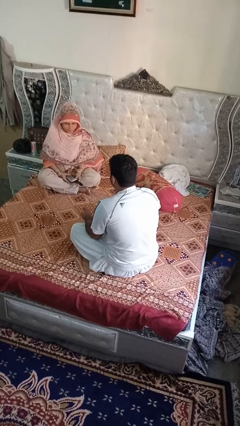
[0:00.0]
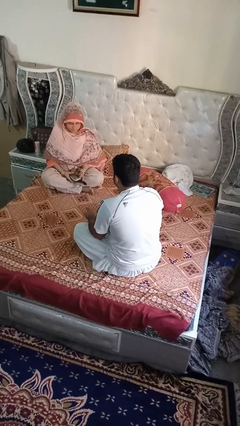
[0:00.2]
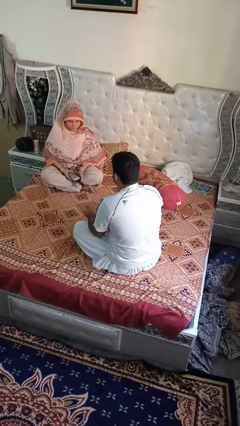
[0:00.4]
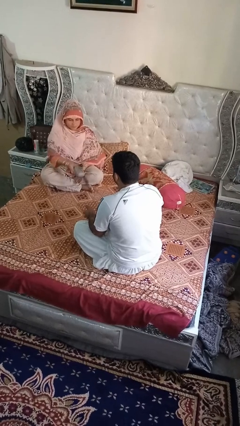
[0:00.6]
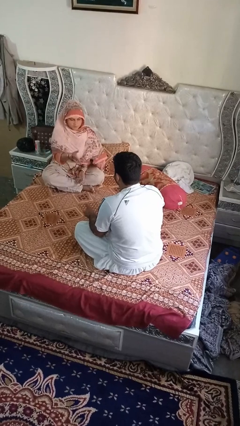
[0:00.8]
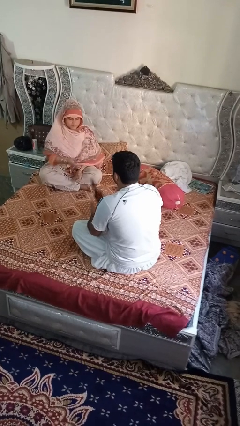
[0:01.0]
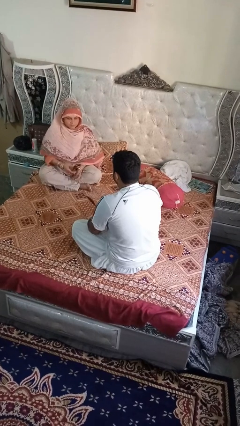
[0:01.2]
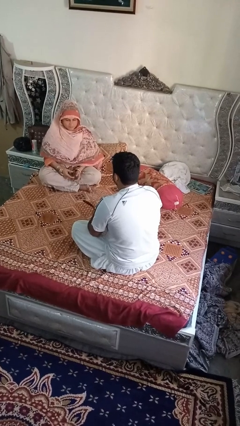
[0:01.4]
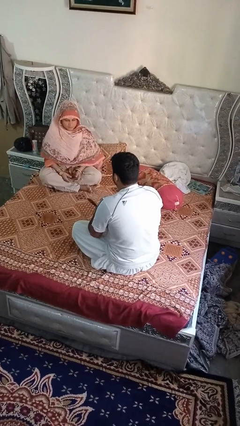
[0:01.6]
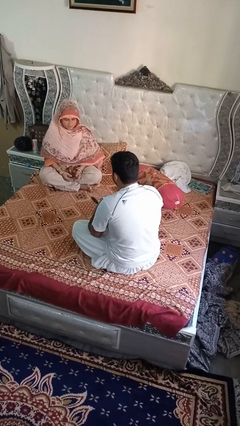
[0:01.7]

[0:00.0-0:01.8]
person catches object from person

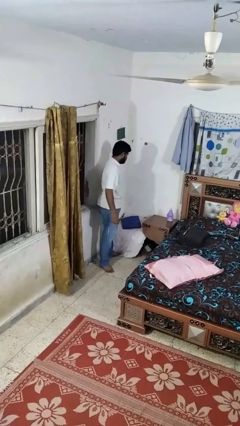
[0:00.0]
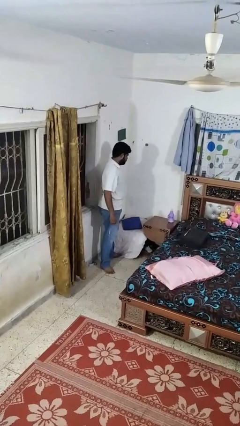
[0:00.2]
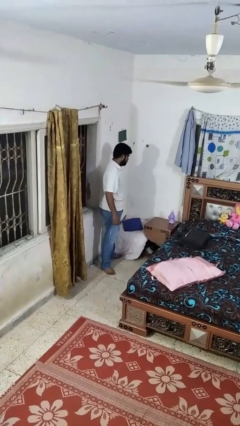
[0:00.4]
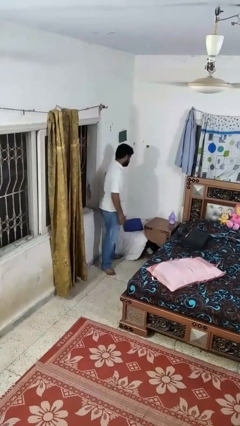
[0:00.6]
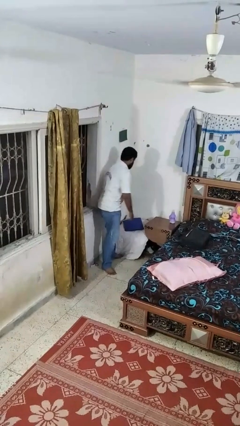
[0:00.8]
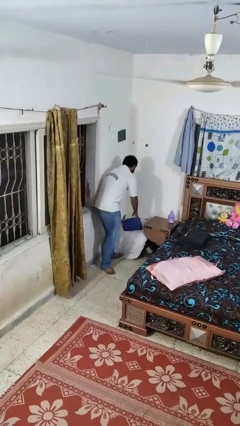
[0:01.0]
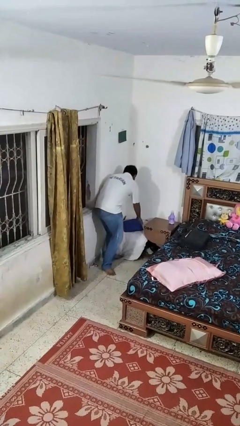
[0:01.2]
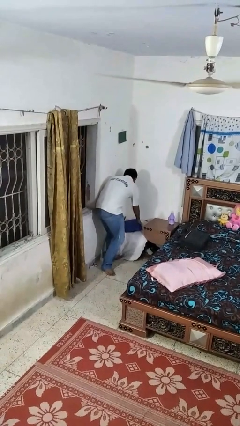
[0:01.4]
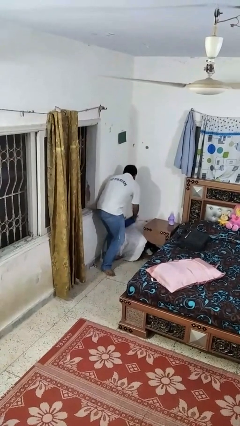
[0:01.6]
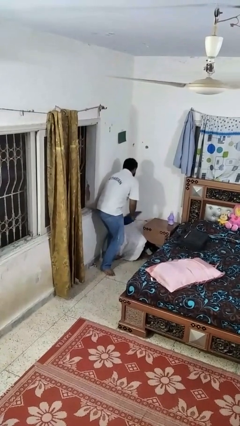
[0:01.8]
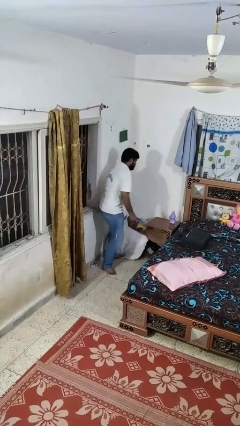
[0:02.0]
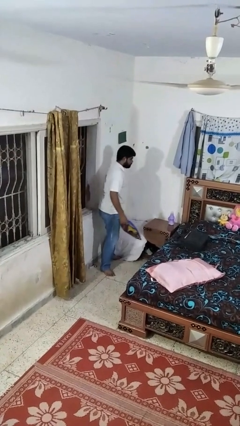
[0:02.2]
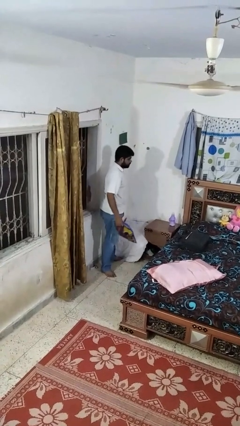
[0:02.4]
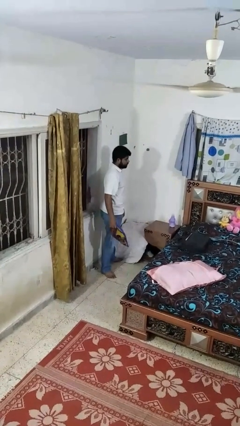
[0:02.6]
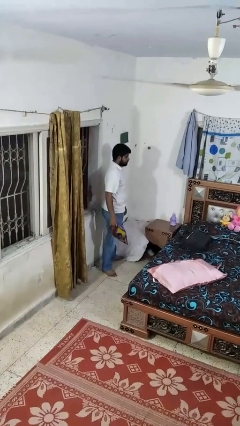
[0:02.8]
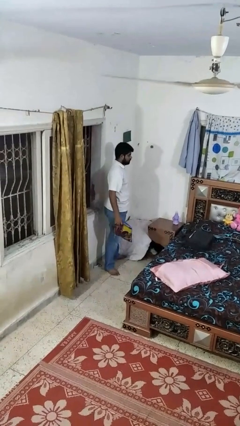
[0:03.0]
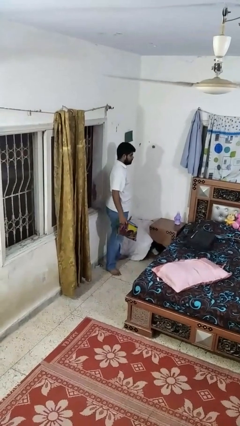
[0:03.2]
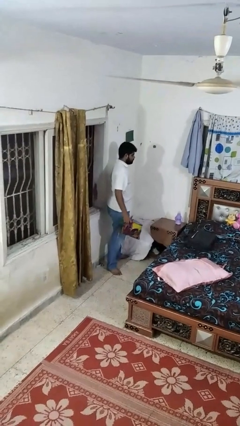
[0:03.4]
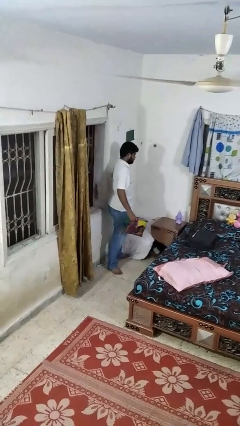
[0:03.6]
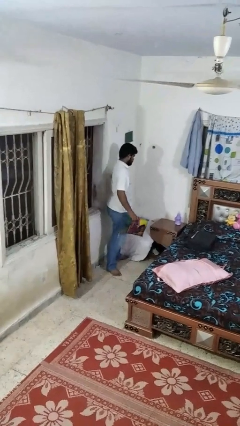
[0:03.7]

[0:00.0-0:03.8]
person picks up object from couch

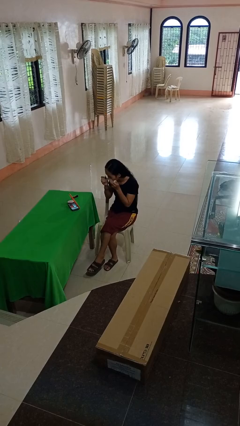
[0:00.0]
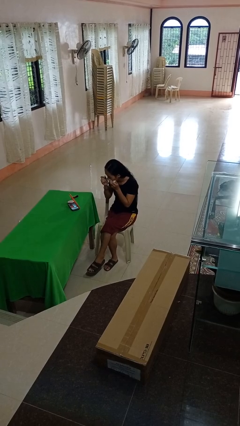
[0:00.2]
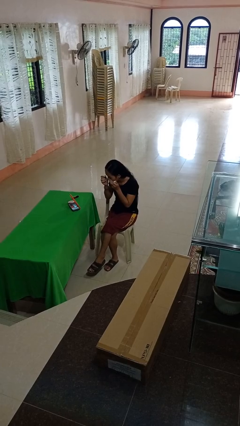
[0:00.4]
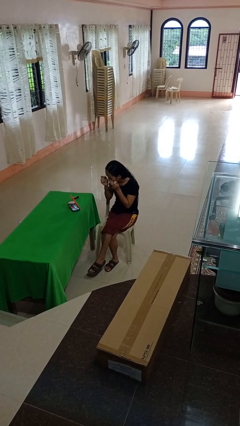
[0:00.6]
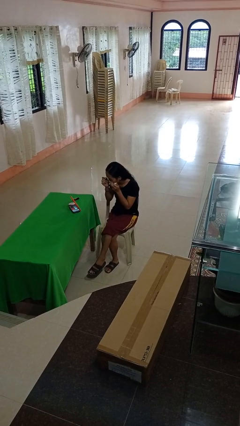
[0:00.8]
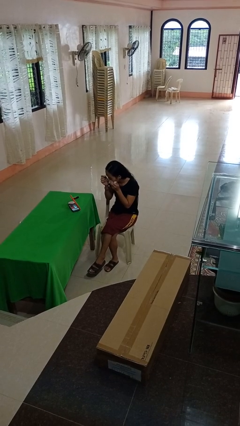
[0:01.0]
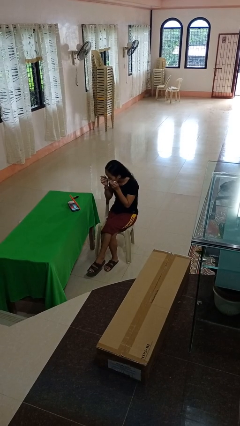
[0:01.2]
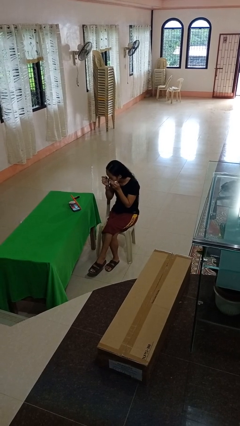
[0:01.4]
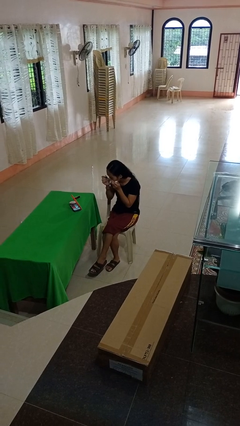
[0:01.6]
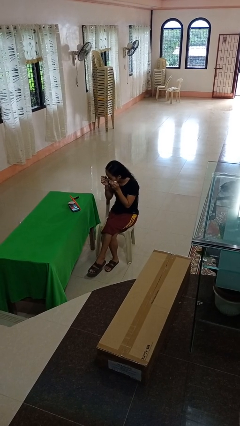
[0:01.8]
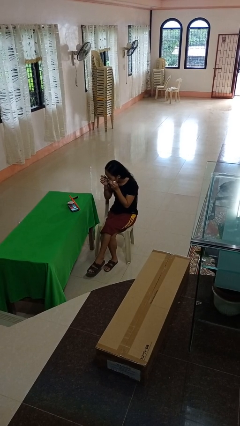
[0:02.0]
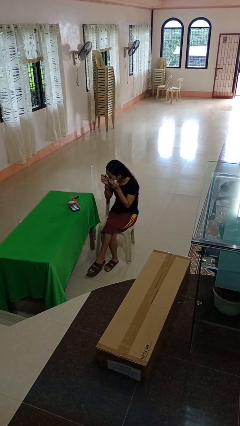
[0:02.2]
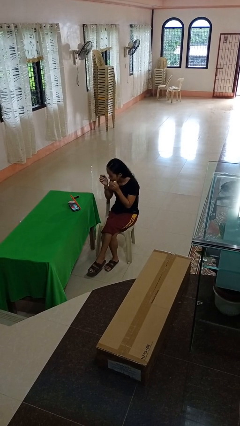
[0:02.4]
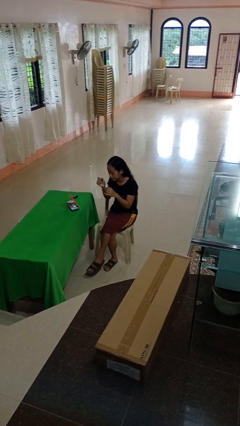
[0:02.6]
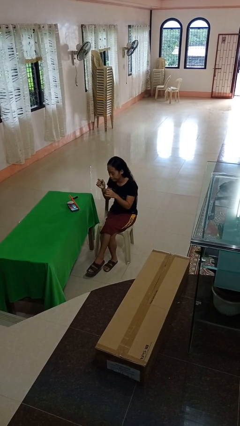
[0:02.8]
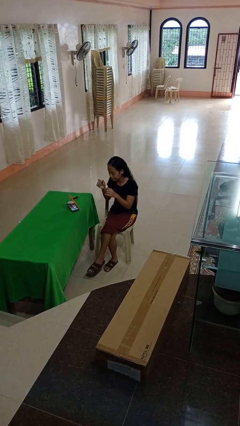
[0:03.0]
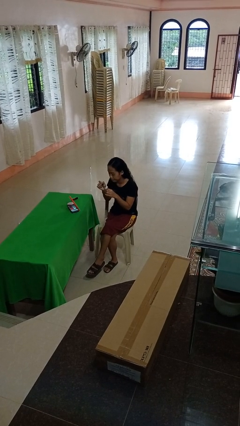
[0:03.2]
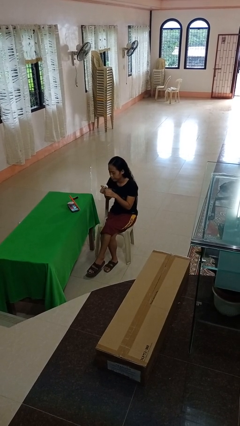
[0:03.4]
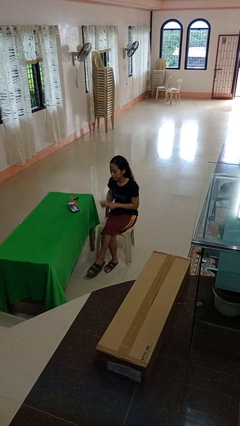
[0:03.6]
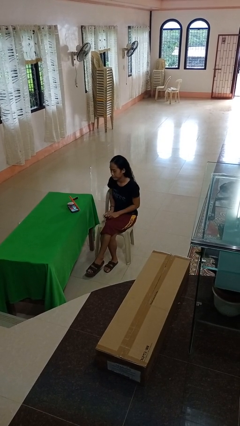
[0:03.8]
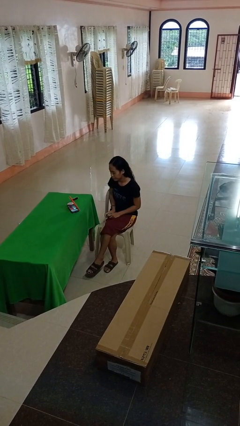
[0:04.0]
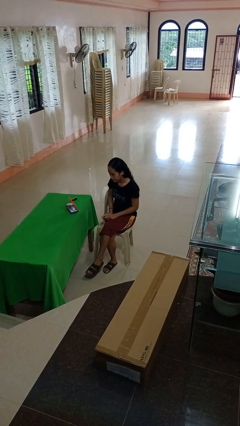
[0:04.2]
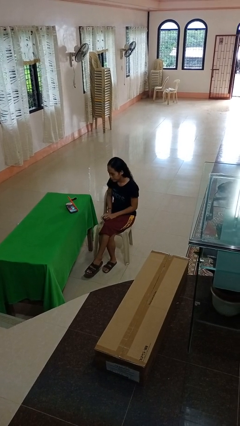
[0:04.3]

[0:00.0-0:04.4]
person applies eye makeup

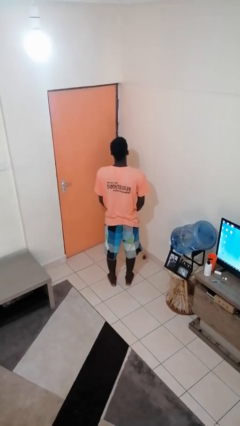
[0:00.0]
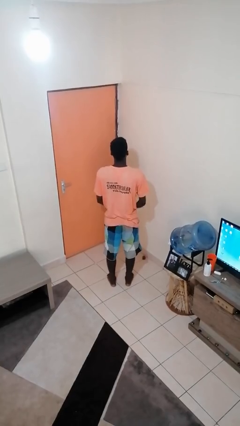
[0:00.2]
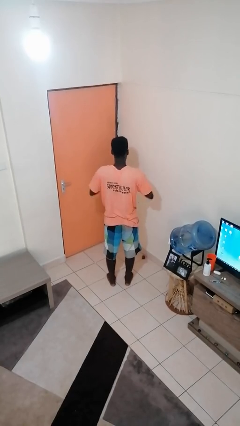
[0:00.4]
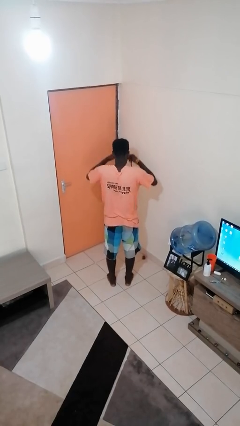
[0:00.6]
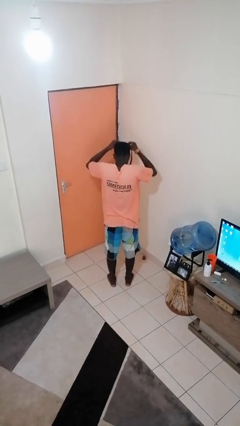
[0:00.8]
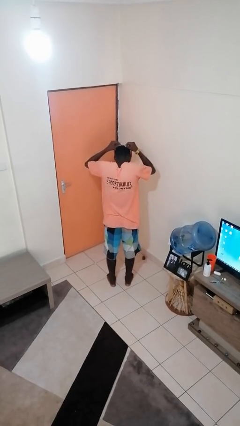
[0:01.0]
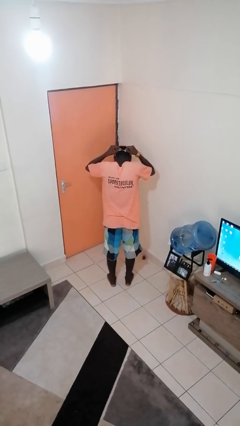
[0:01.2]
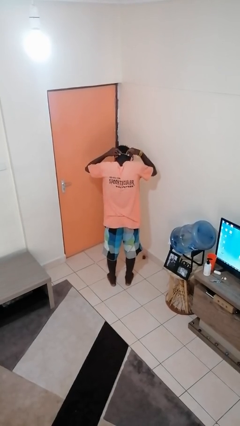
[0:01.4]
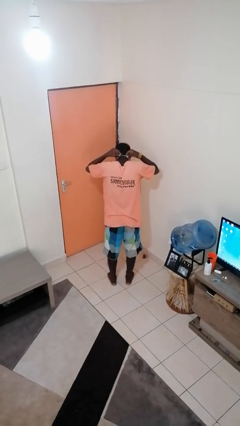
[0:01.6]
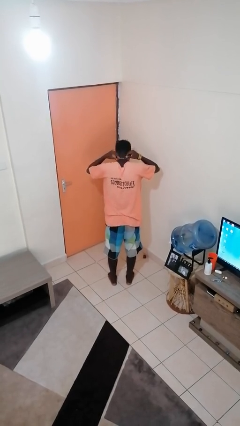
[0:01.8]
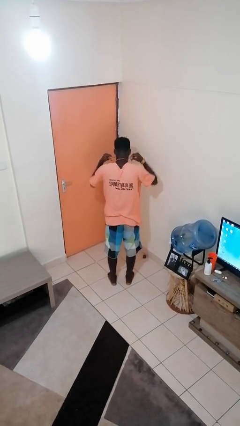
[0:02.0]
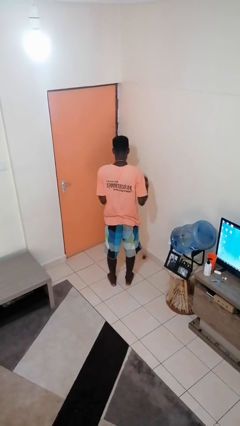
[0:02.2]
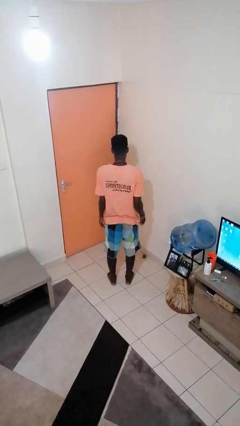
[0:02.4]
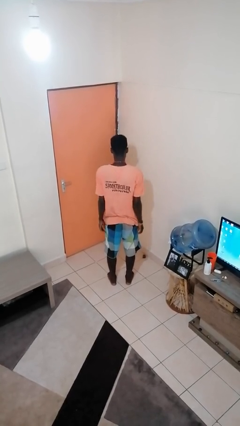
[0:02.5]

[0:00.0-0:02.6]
person puts on necklace

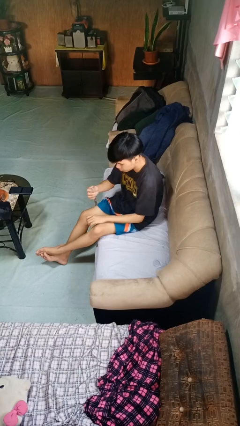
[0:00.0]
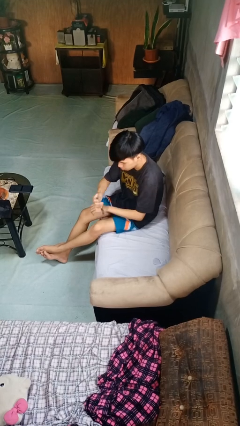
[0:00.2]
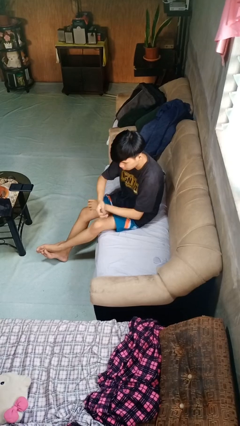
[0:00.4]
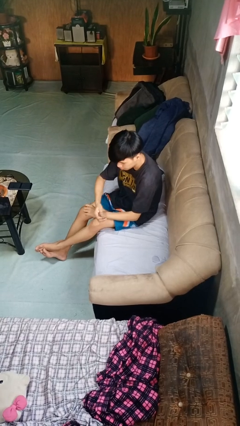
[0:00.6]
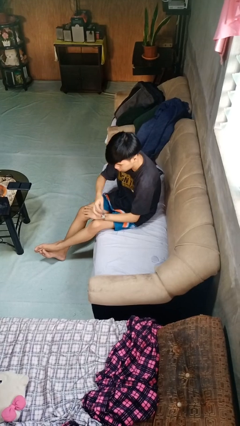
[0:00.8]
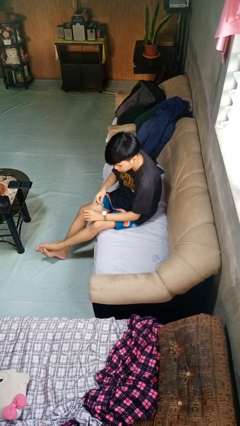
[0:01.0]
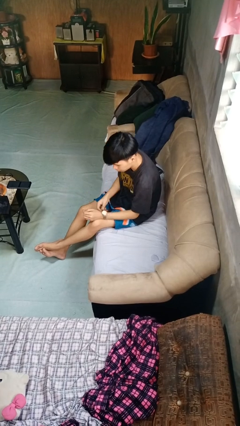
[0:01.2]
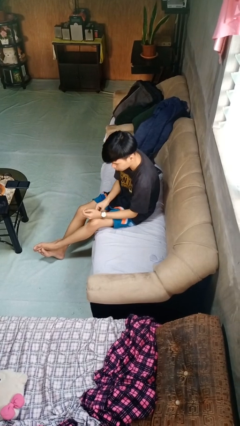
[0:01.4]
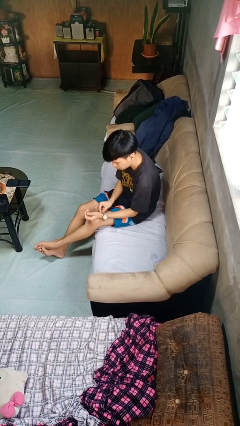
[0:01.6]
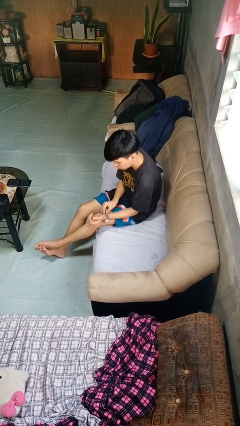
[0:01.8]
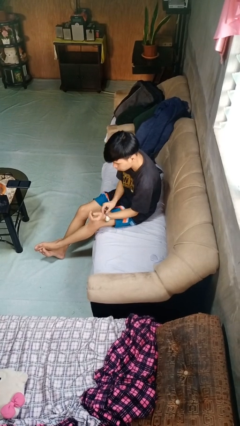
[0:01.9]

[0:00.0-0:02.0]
person puts on wristwatch

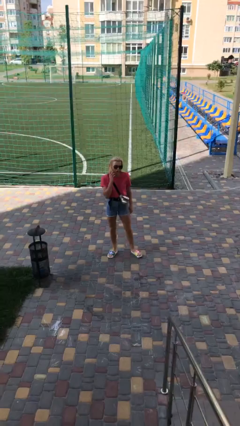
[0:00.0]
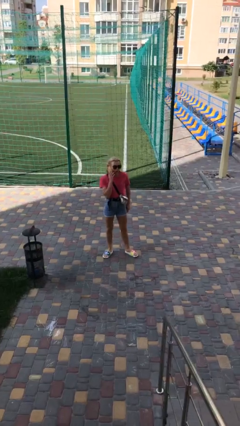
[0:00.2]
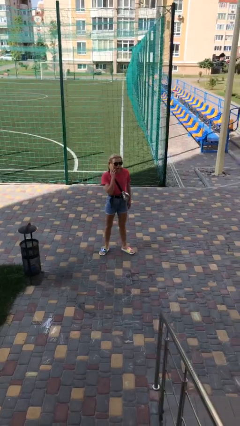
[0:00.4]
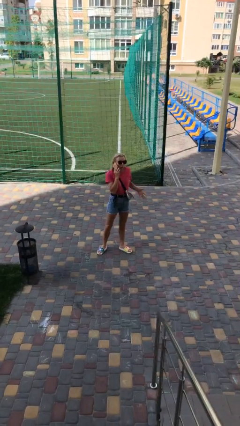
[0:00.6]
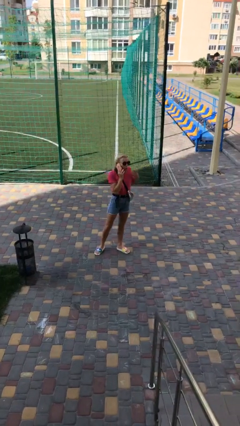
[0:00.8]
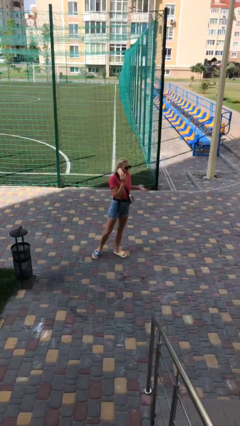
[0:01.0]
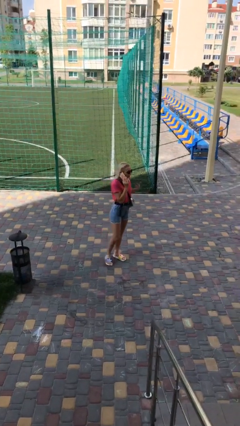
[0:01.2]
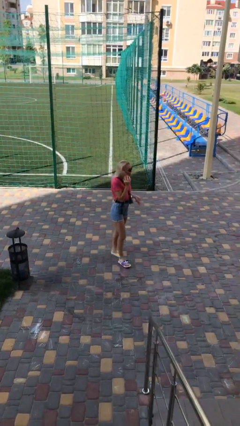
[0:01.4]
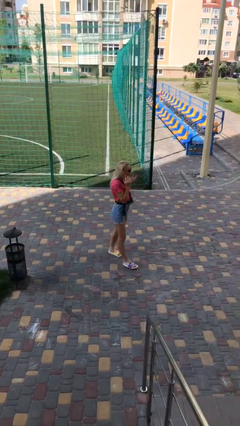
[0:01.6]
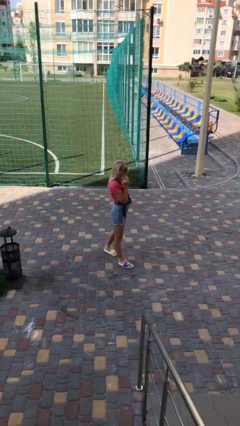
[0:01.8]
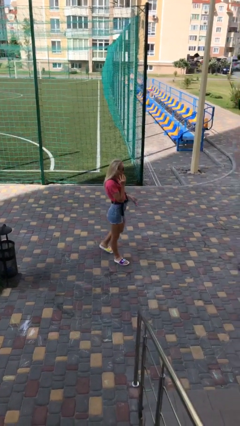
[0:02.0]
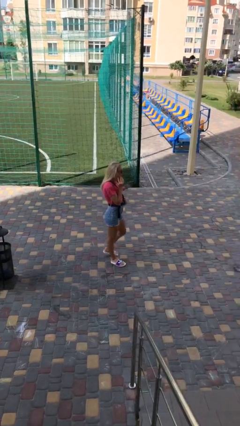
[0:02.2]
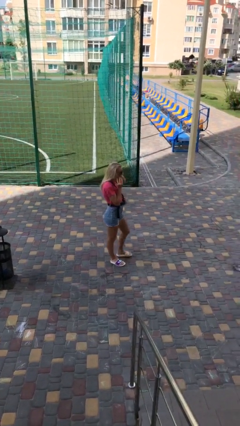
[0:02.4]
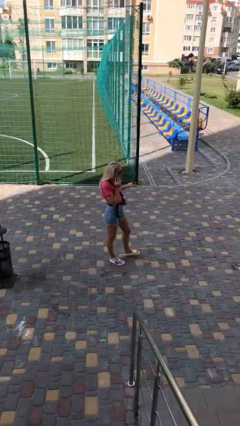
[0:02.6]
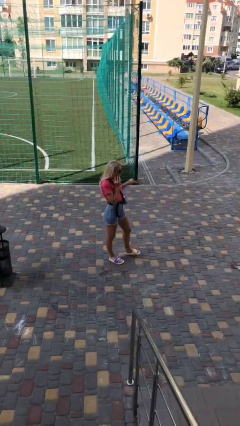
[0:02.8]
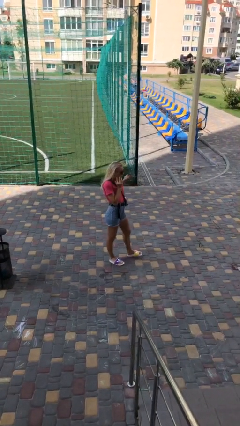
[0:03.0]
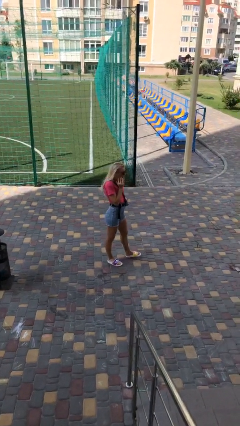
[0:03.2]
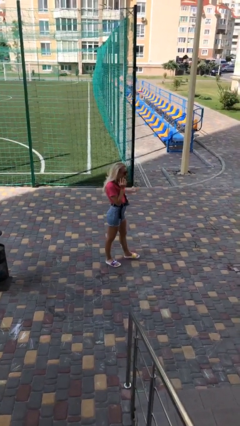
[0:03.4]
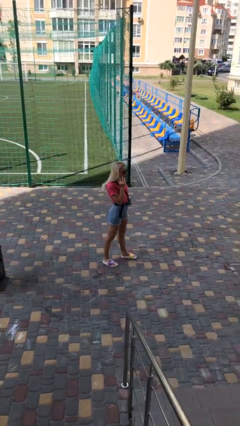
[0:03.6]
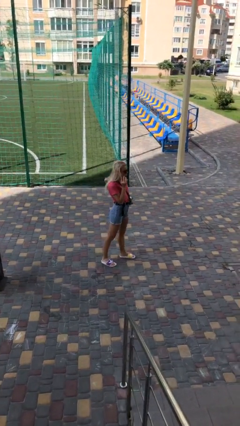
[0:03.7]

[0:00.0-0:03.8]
person talks on phone
